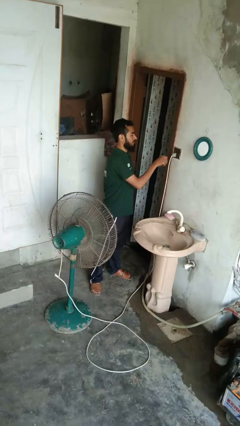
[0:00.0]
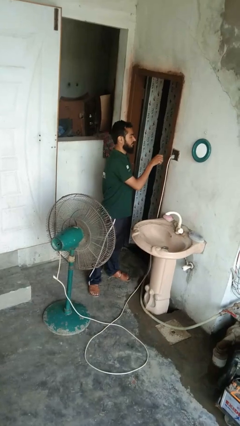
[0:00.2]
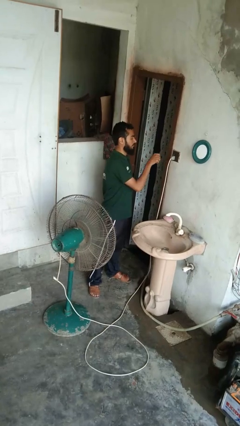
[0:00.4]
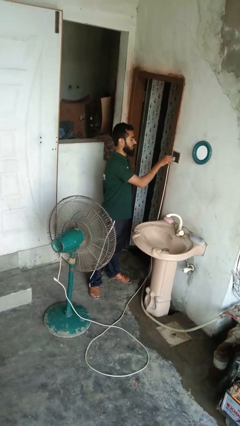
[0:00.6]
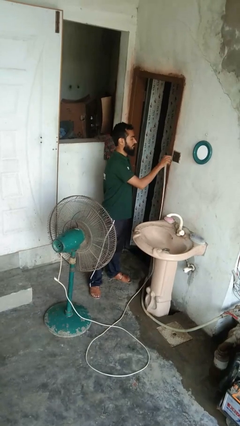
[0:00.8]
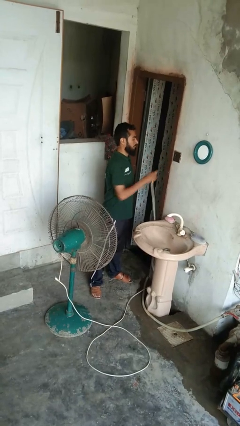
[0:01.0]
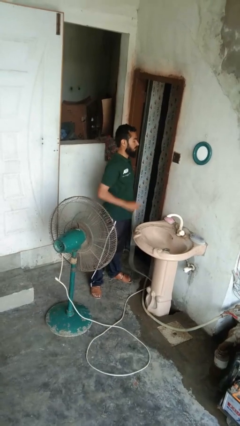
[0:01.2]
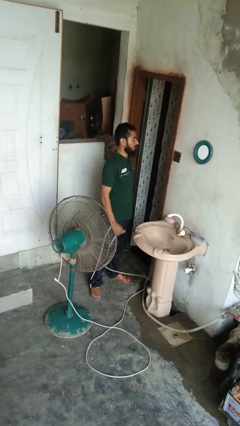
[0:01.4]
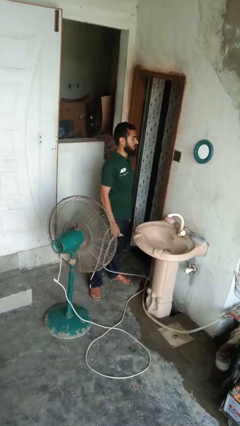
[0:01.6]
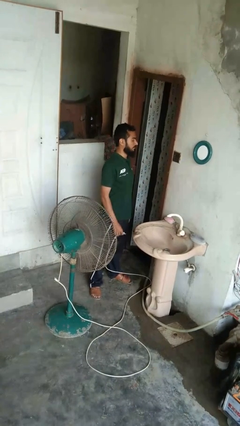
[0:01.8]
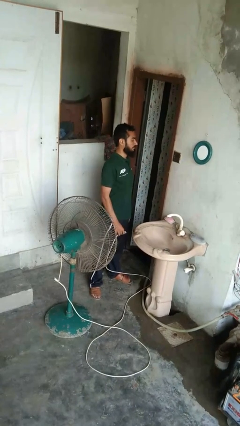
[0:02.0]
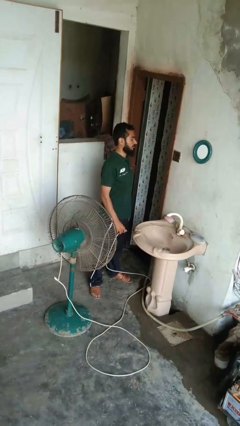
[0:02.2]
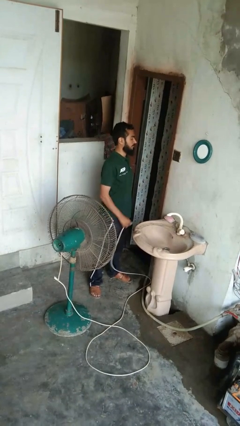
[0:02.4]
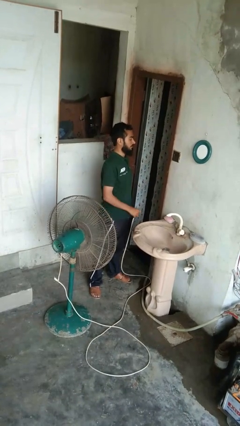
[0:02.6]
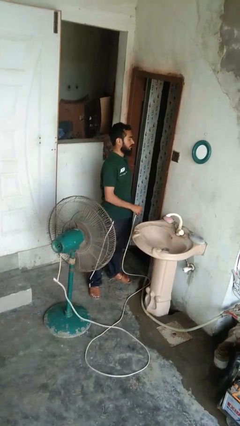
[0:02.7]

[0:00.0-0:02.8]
person turns off fan

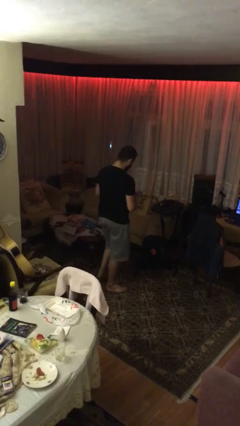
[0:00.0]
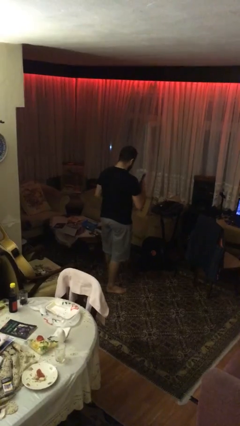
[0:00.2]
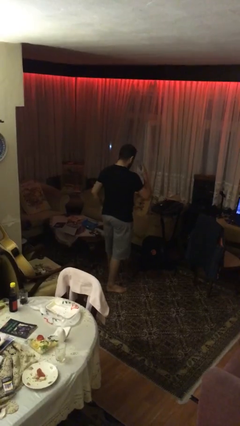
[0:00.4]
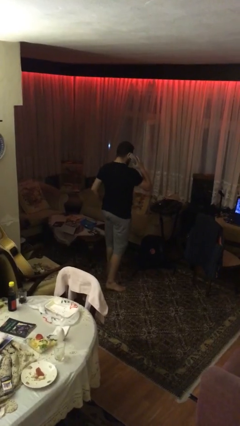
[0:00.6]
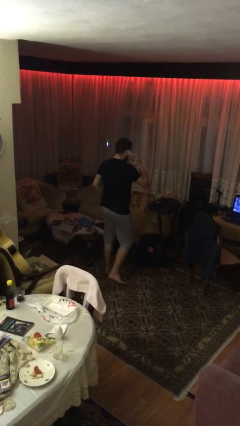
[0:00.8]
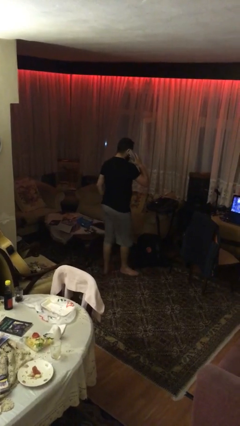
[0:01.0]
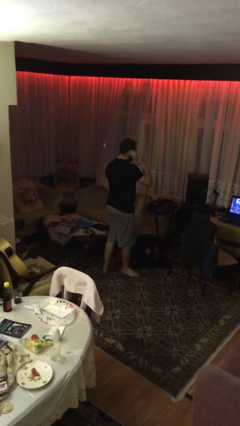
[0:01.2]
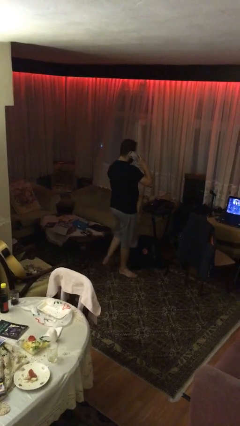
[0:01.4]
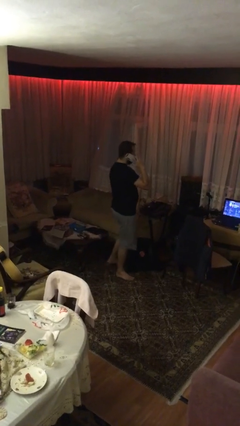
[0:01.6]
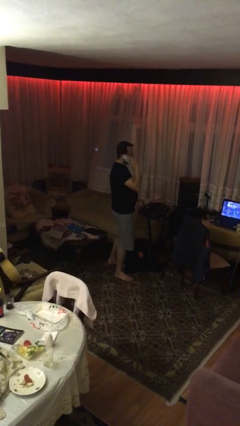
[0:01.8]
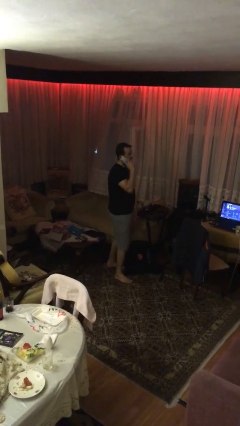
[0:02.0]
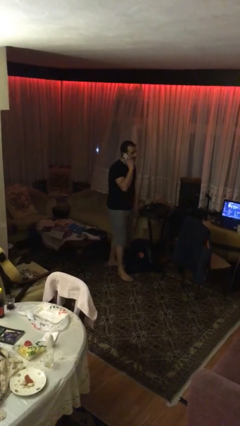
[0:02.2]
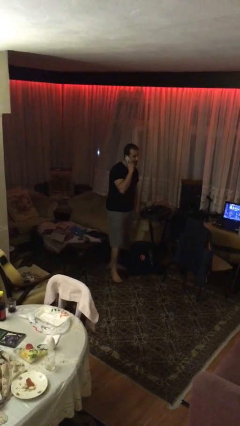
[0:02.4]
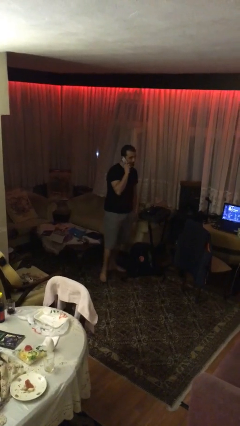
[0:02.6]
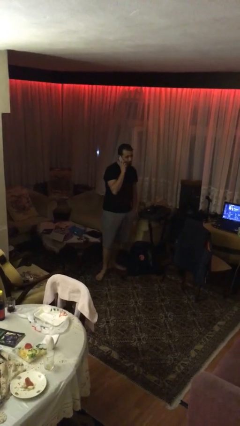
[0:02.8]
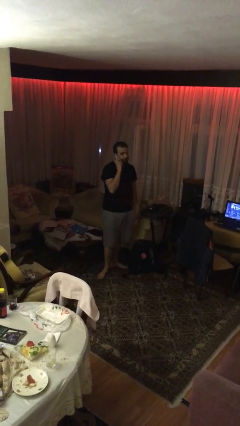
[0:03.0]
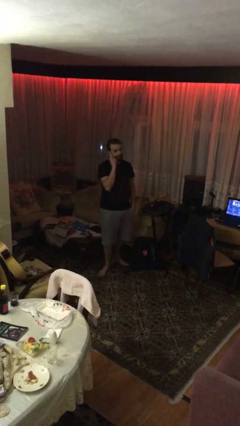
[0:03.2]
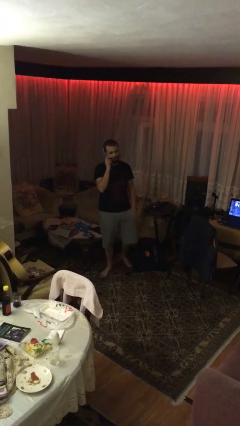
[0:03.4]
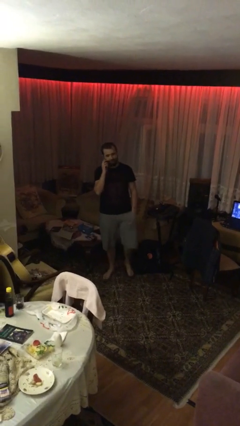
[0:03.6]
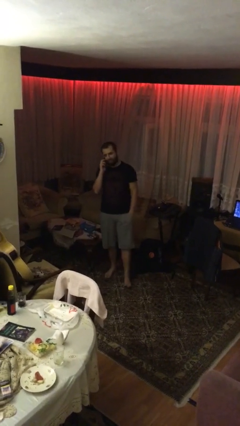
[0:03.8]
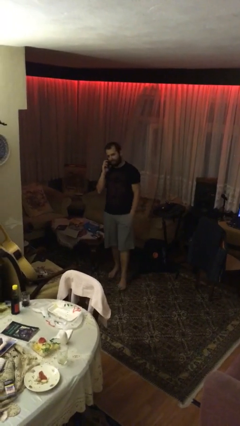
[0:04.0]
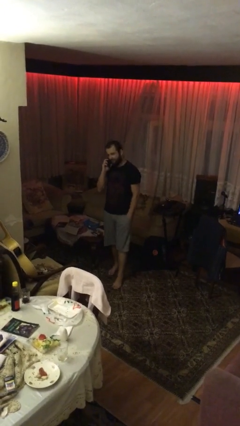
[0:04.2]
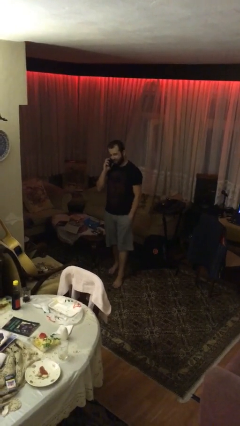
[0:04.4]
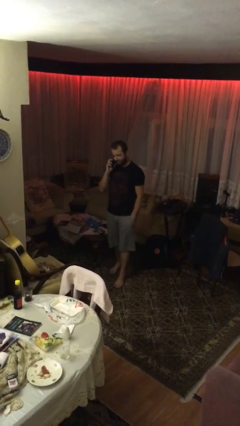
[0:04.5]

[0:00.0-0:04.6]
person talks on phone

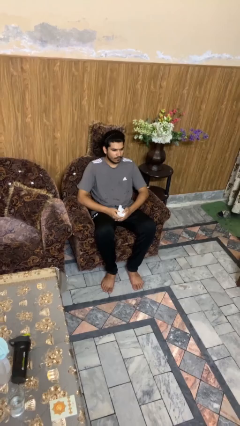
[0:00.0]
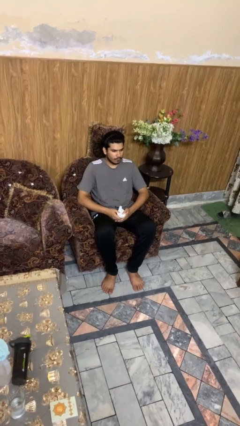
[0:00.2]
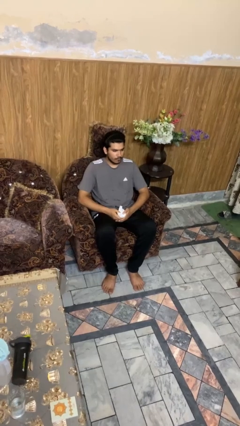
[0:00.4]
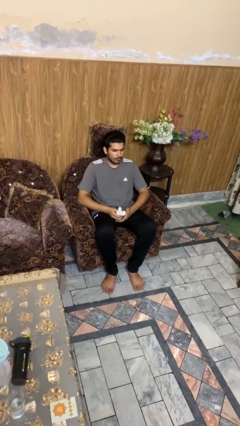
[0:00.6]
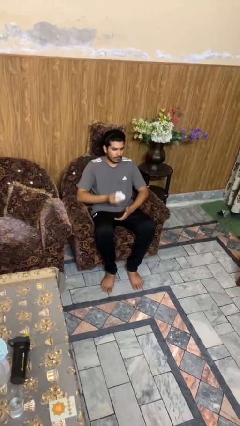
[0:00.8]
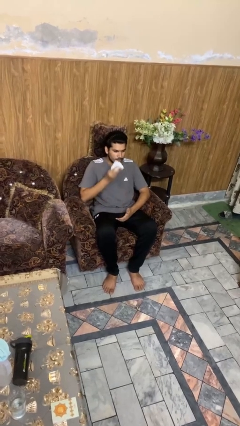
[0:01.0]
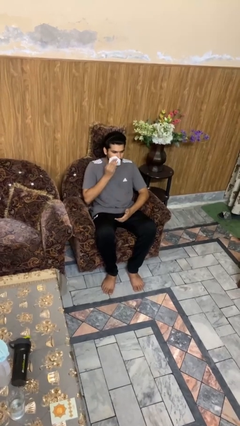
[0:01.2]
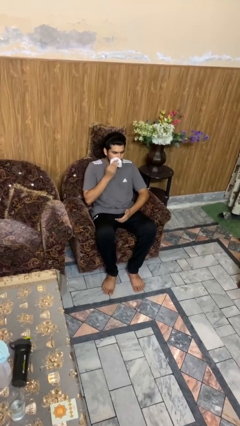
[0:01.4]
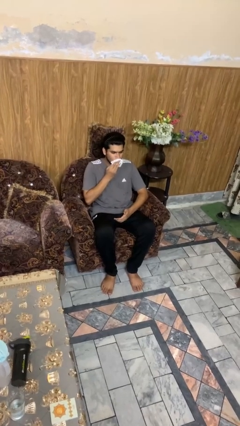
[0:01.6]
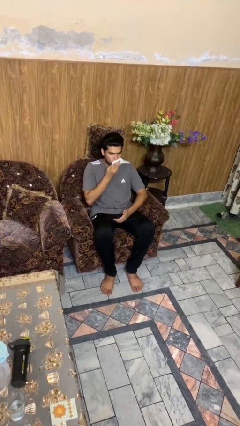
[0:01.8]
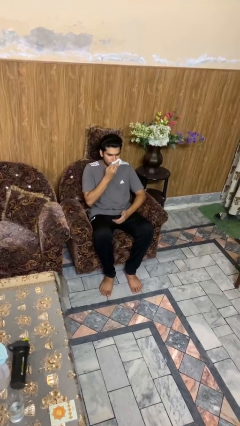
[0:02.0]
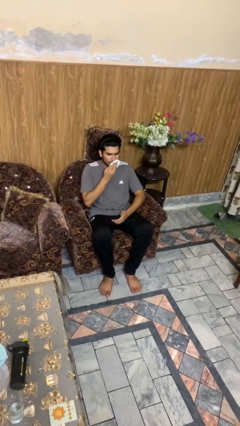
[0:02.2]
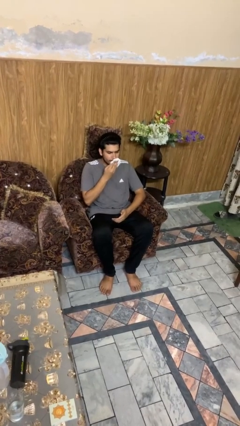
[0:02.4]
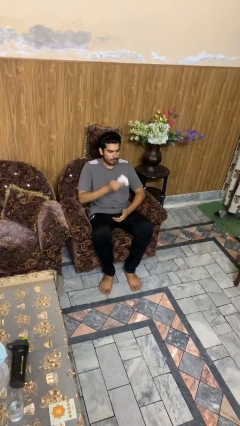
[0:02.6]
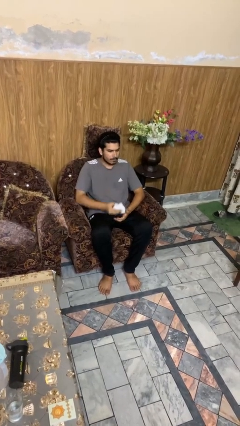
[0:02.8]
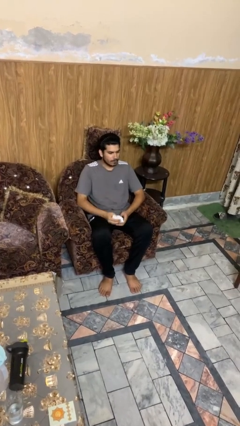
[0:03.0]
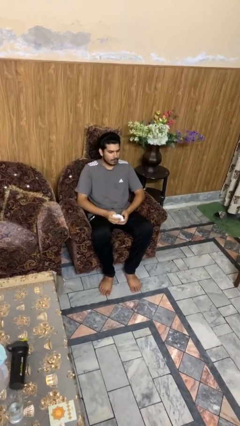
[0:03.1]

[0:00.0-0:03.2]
person wipes mouth with napkin

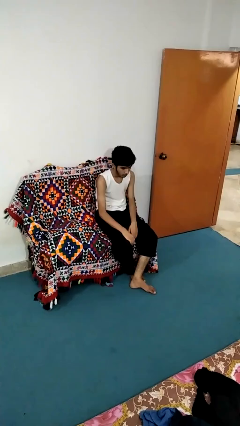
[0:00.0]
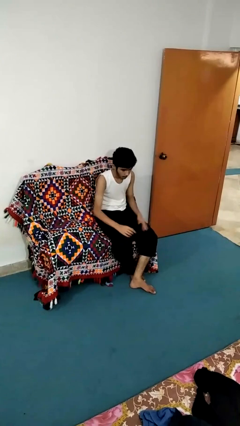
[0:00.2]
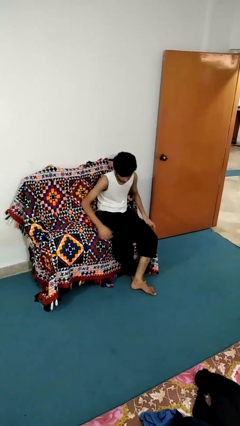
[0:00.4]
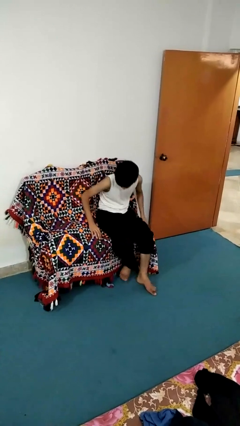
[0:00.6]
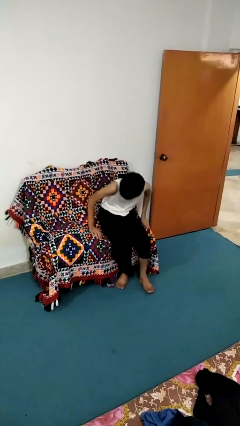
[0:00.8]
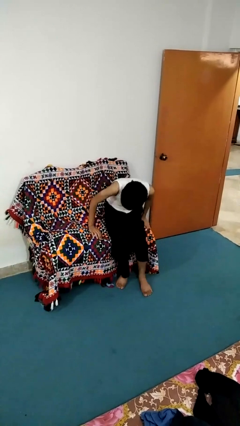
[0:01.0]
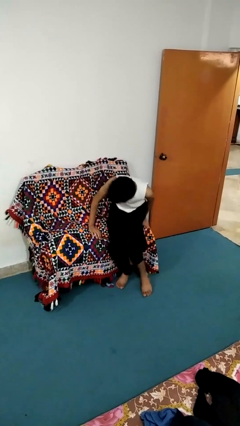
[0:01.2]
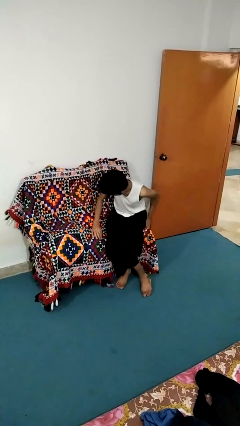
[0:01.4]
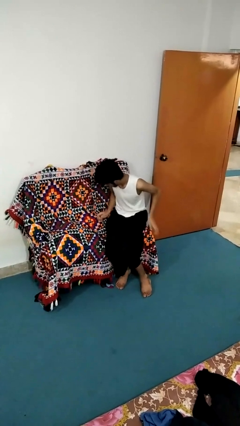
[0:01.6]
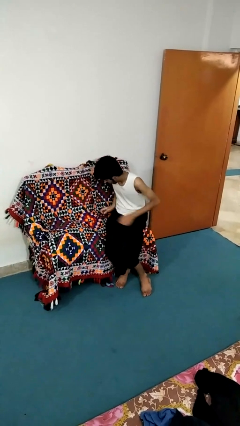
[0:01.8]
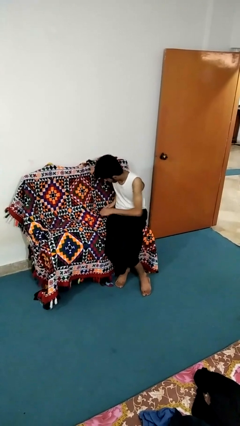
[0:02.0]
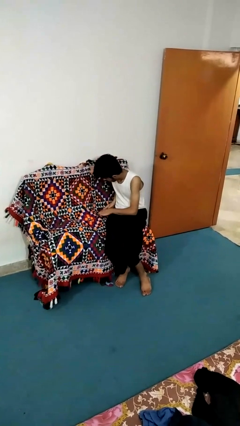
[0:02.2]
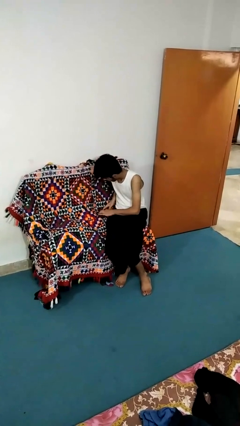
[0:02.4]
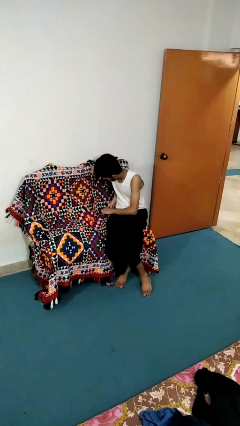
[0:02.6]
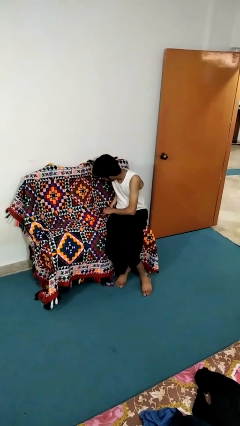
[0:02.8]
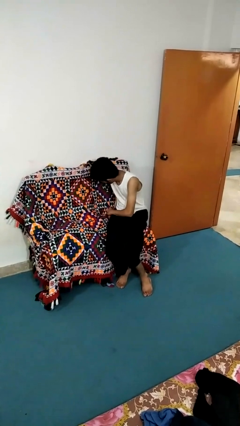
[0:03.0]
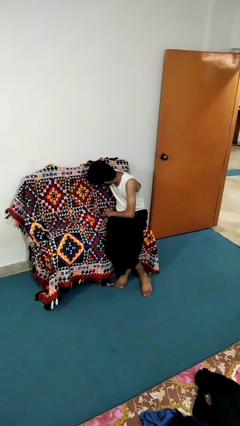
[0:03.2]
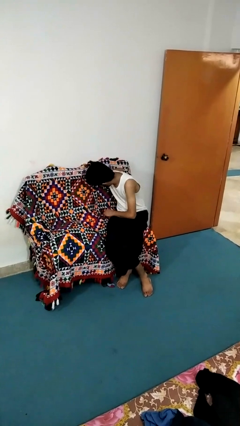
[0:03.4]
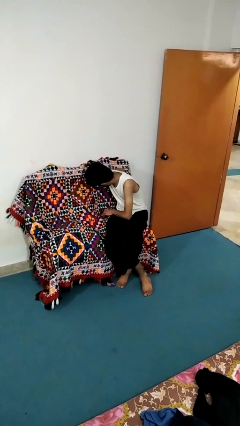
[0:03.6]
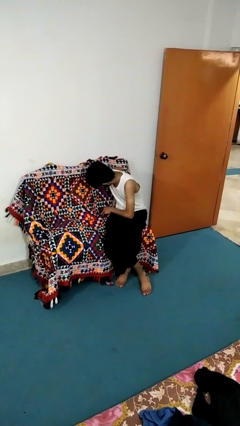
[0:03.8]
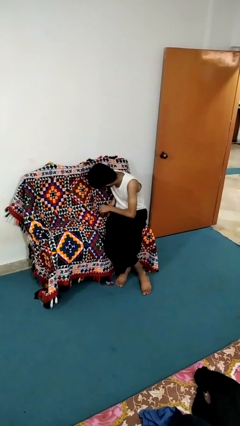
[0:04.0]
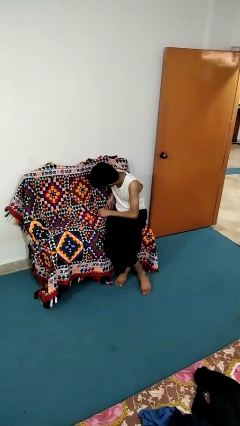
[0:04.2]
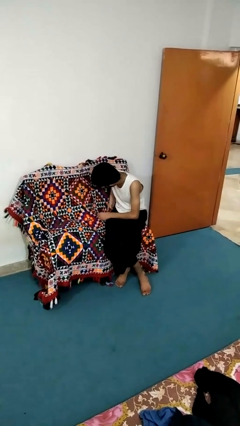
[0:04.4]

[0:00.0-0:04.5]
person searches in couch

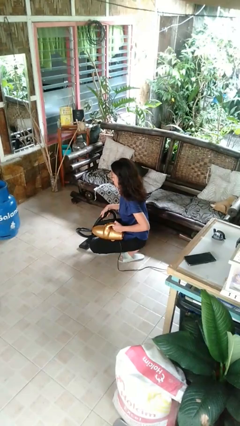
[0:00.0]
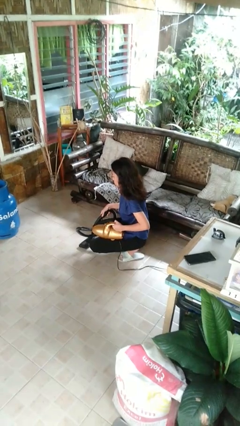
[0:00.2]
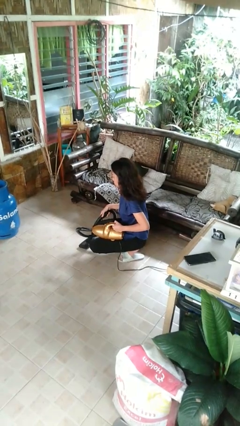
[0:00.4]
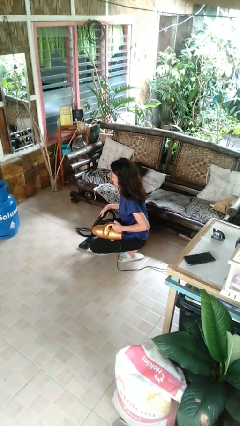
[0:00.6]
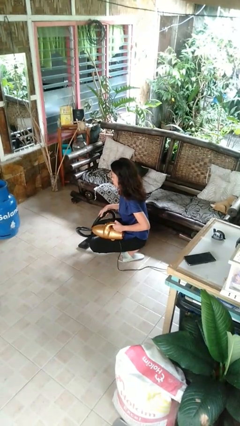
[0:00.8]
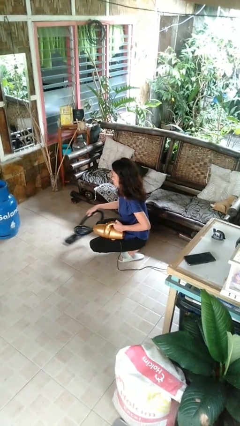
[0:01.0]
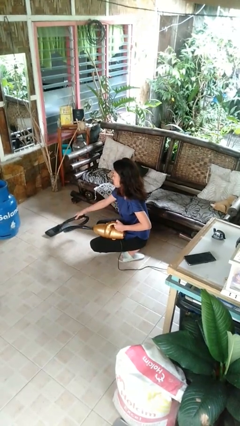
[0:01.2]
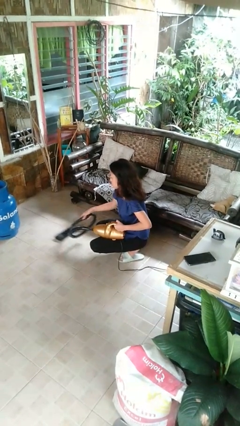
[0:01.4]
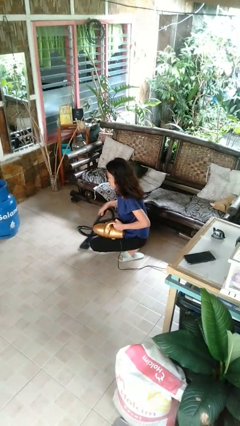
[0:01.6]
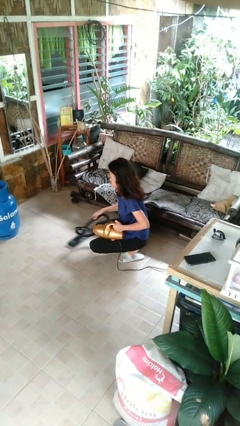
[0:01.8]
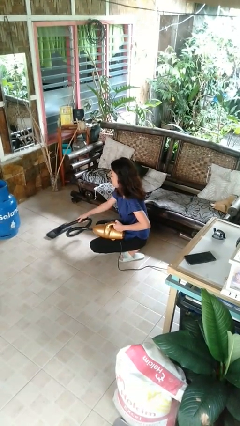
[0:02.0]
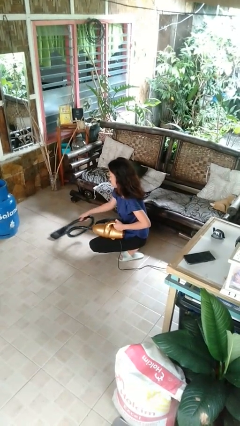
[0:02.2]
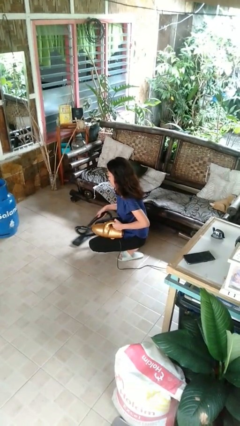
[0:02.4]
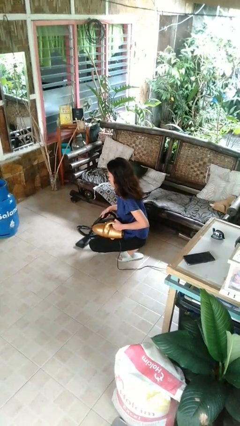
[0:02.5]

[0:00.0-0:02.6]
person vacuums carpet
